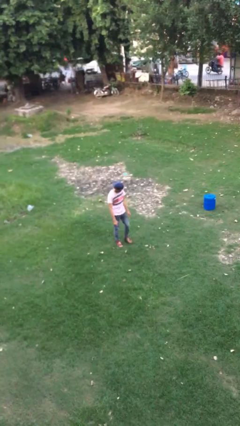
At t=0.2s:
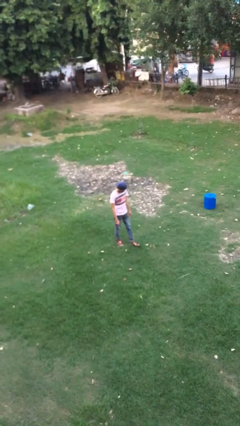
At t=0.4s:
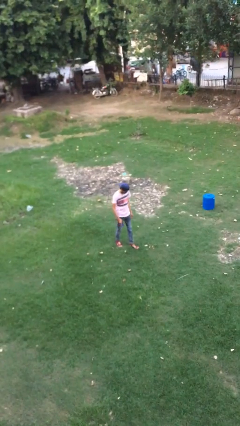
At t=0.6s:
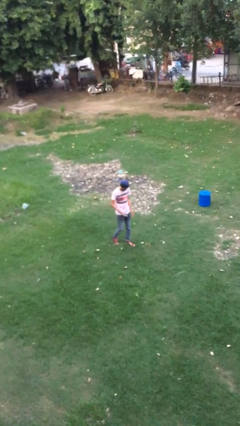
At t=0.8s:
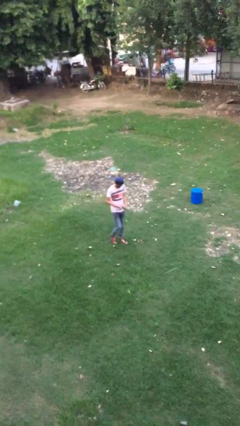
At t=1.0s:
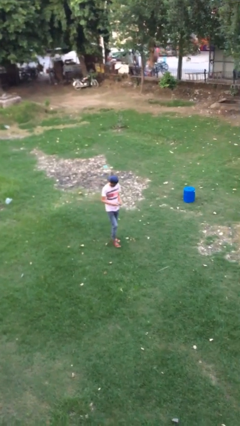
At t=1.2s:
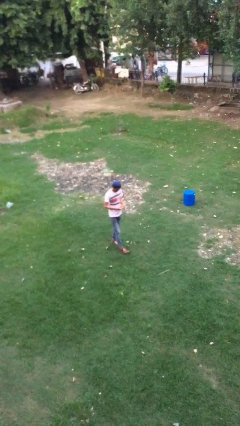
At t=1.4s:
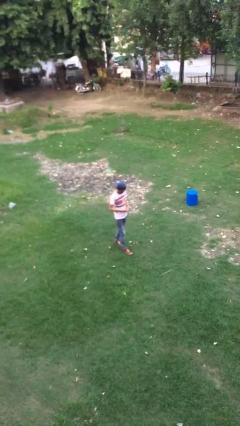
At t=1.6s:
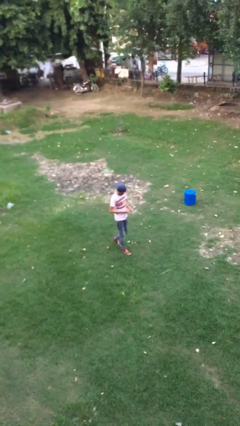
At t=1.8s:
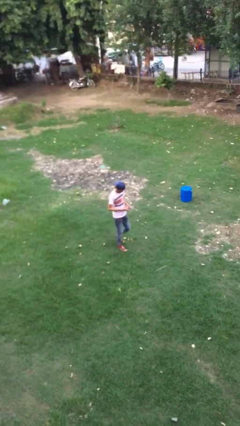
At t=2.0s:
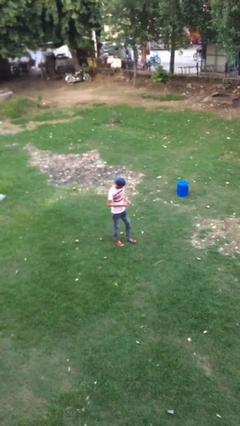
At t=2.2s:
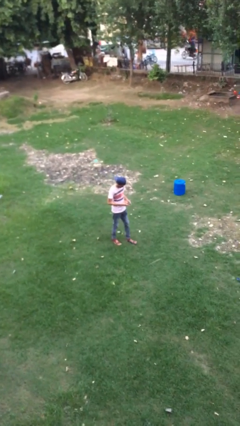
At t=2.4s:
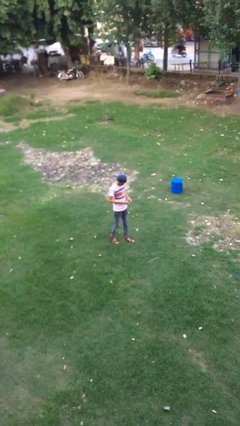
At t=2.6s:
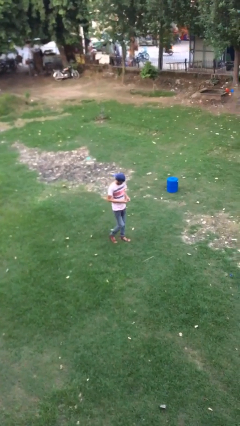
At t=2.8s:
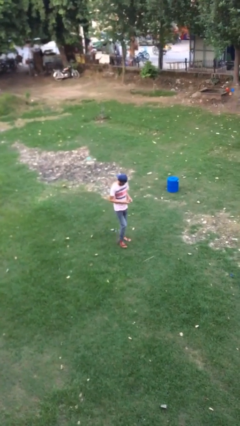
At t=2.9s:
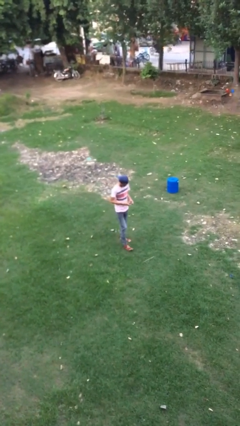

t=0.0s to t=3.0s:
person texts on phone

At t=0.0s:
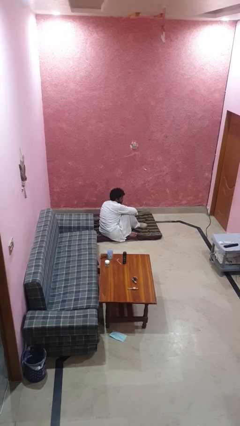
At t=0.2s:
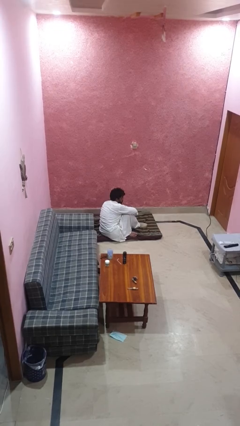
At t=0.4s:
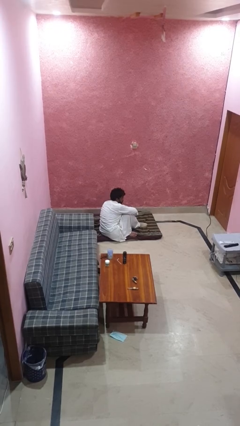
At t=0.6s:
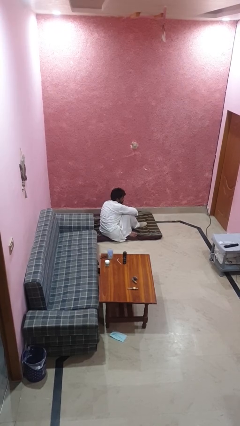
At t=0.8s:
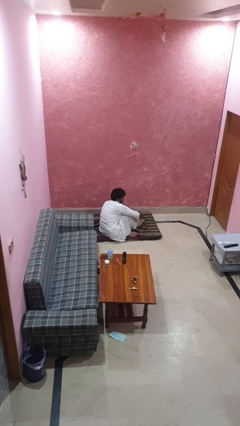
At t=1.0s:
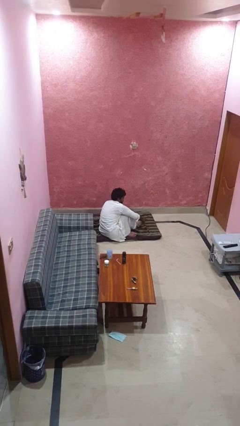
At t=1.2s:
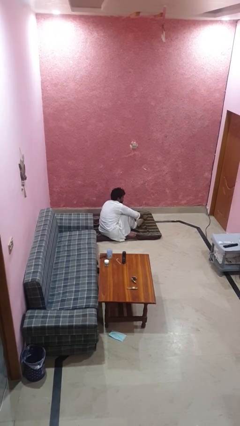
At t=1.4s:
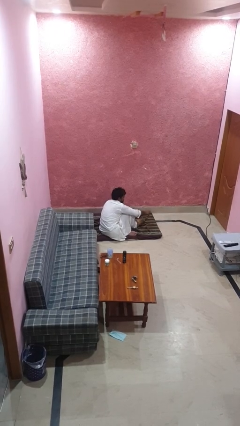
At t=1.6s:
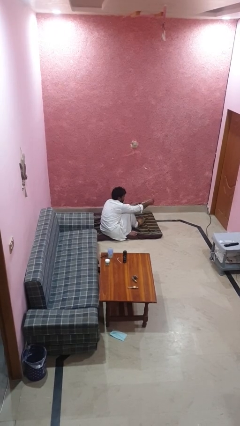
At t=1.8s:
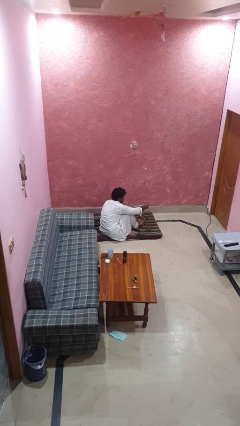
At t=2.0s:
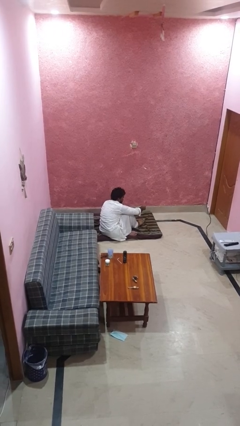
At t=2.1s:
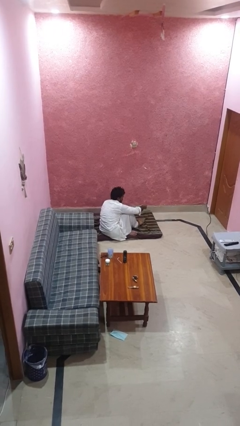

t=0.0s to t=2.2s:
person takes off socks

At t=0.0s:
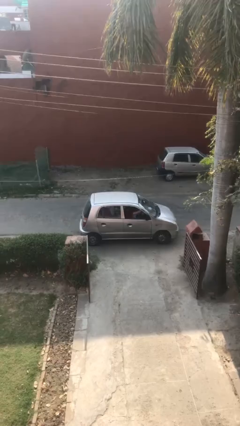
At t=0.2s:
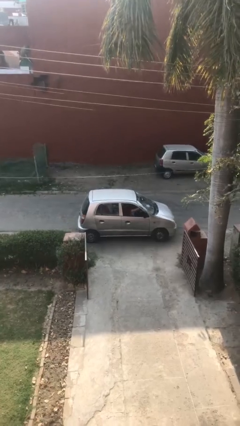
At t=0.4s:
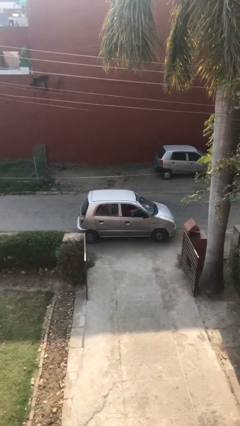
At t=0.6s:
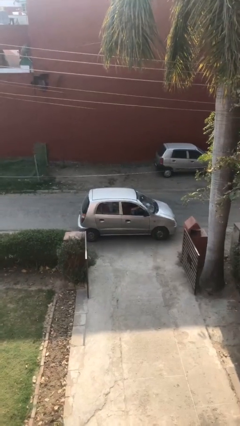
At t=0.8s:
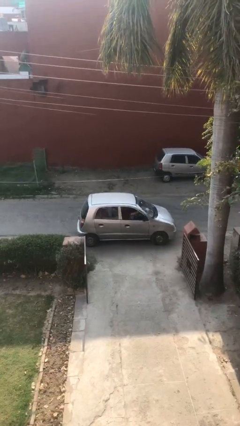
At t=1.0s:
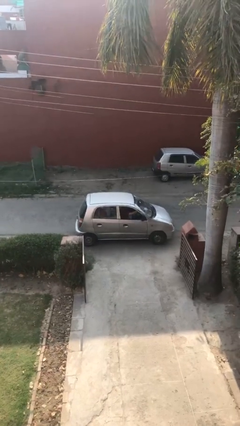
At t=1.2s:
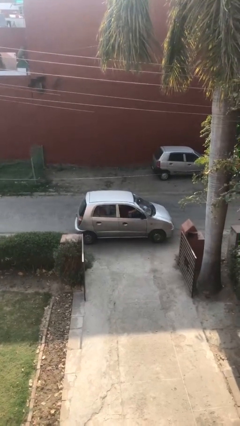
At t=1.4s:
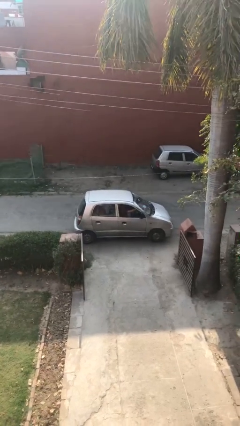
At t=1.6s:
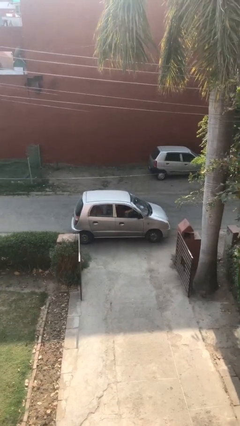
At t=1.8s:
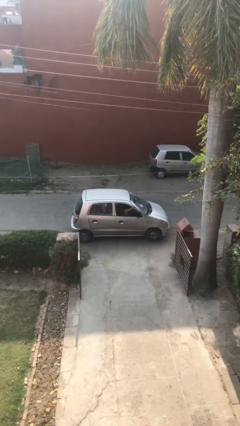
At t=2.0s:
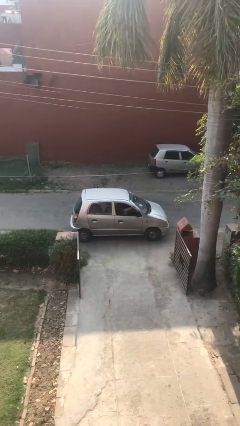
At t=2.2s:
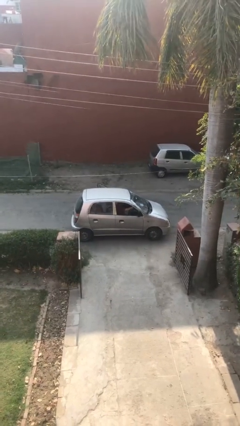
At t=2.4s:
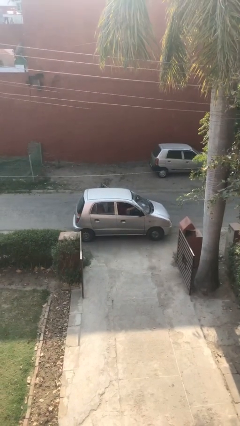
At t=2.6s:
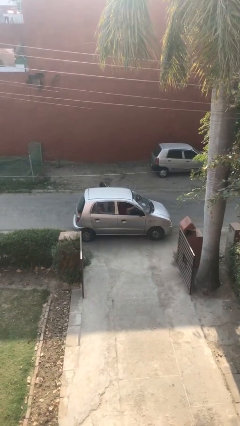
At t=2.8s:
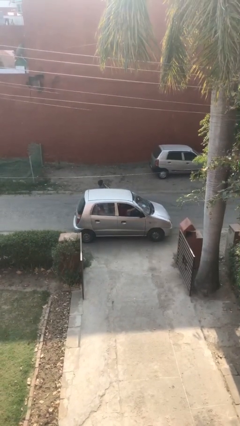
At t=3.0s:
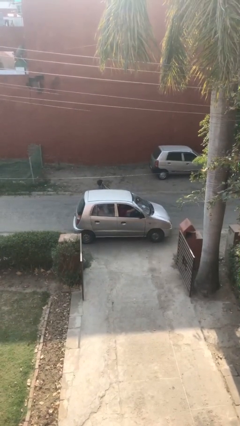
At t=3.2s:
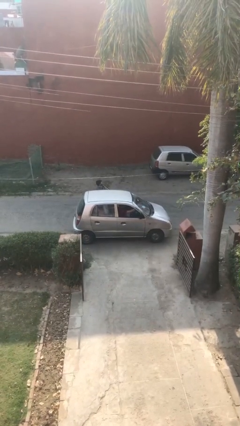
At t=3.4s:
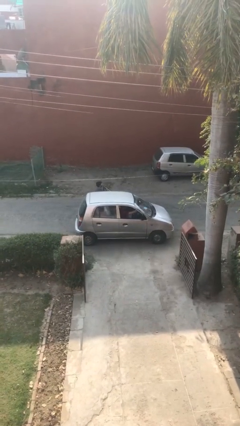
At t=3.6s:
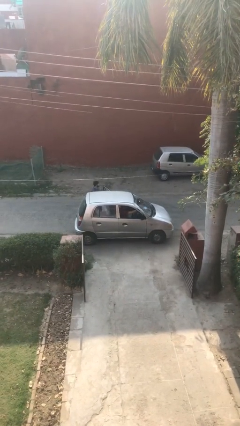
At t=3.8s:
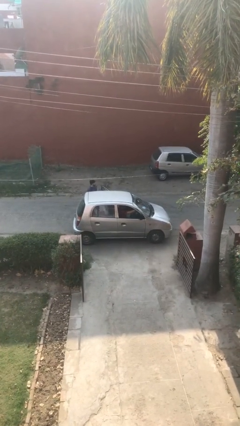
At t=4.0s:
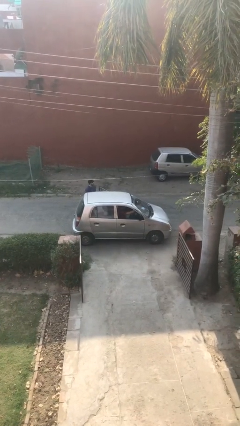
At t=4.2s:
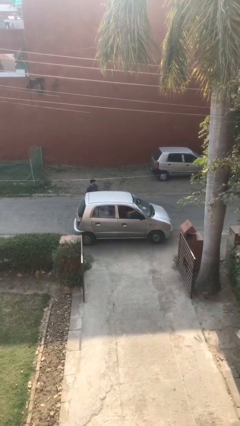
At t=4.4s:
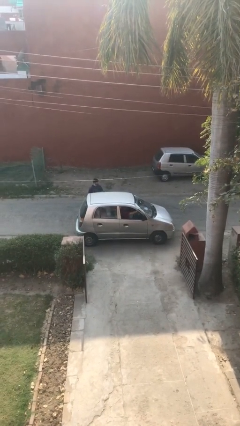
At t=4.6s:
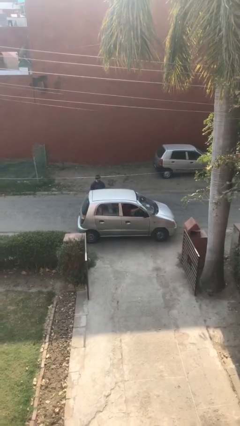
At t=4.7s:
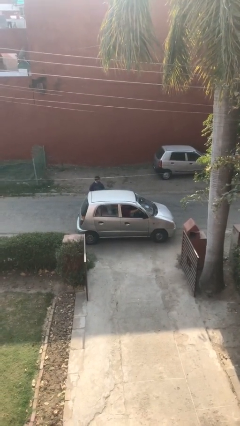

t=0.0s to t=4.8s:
car drops off person

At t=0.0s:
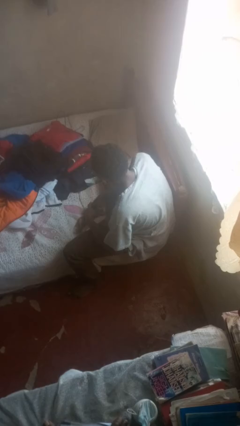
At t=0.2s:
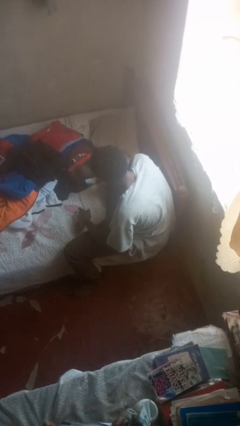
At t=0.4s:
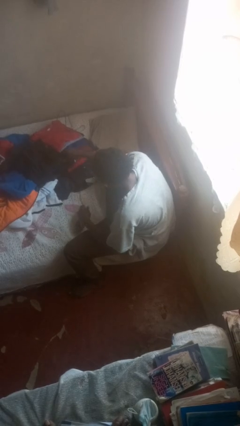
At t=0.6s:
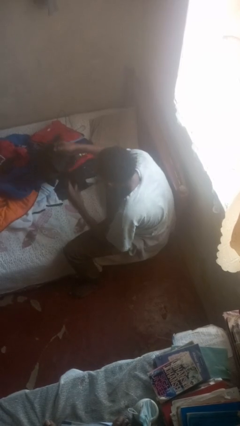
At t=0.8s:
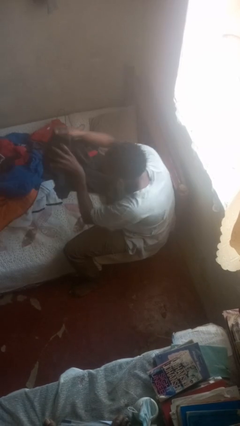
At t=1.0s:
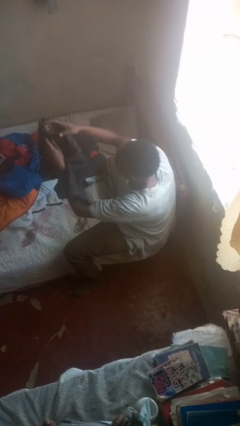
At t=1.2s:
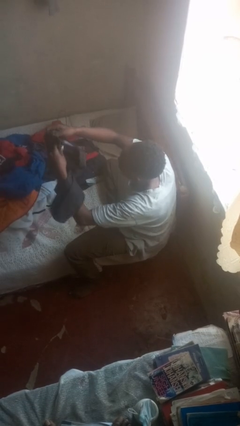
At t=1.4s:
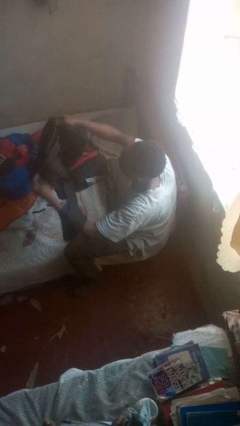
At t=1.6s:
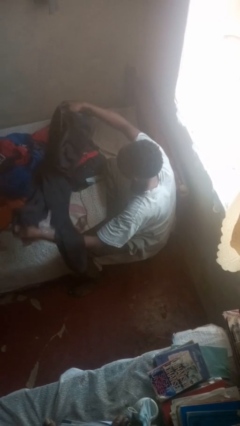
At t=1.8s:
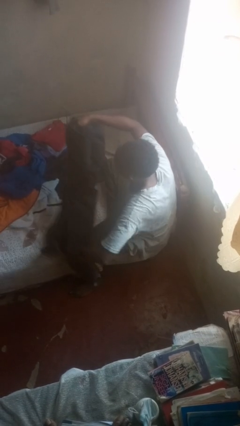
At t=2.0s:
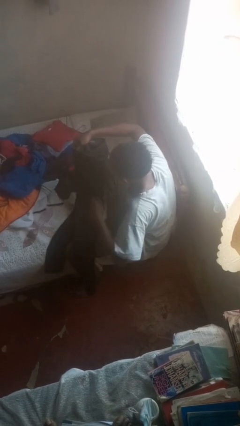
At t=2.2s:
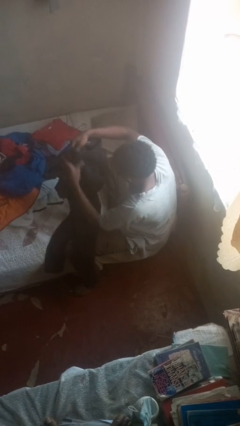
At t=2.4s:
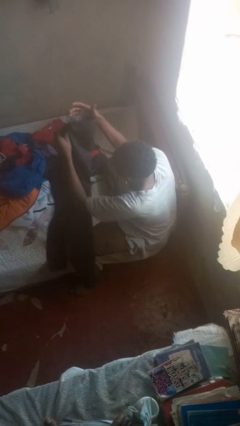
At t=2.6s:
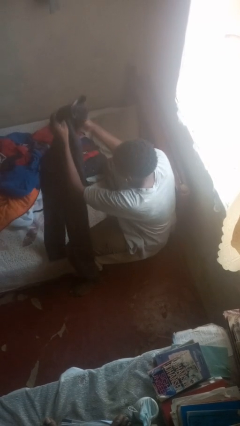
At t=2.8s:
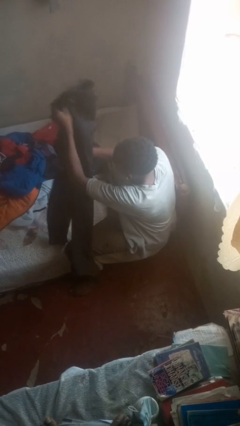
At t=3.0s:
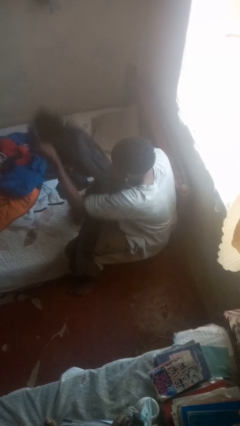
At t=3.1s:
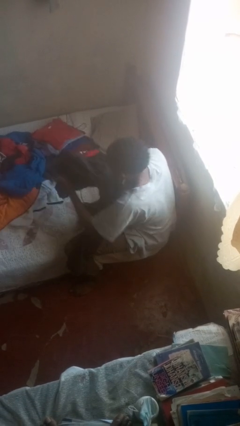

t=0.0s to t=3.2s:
person folds pants

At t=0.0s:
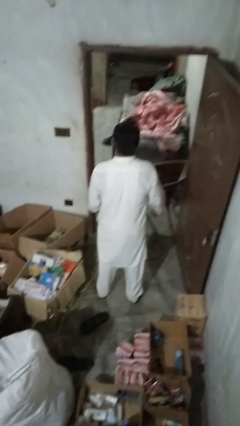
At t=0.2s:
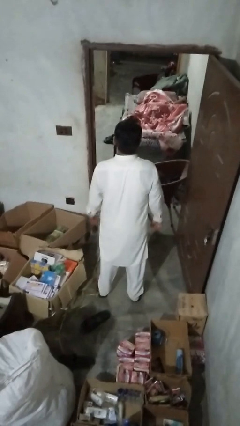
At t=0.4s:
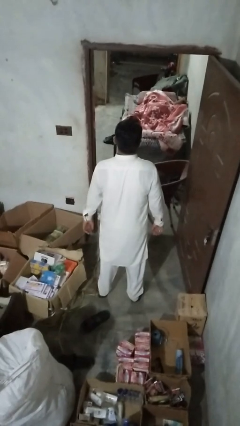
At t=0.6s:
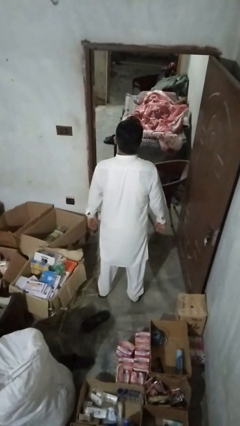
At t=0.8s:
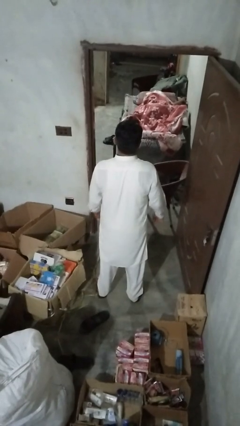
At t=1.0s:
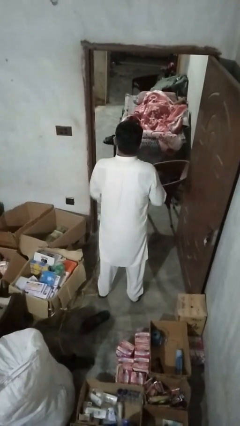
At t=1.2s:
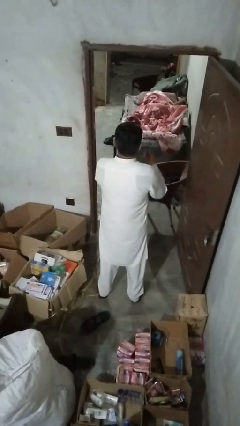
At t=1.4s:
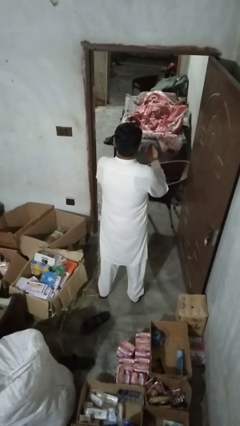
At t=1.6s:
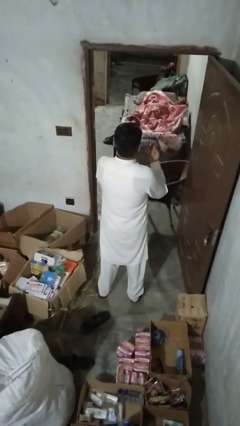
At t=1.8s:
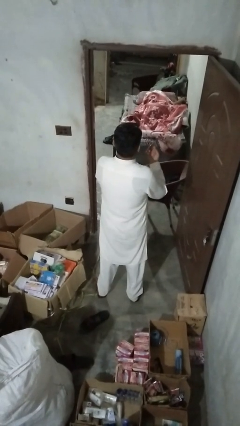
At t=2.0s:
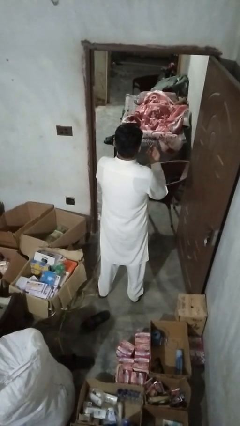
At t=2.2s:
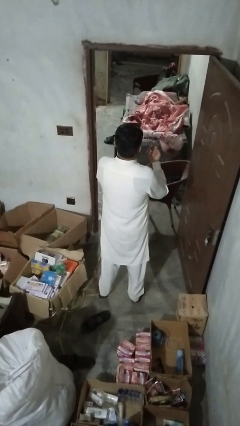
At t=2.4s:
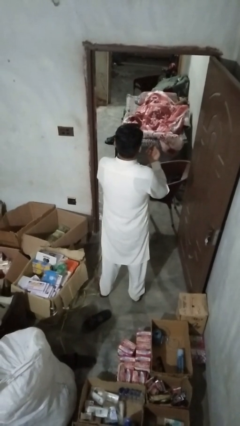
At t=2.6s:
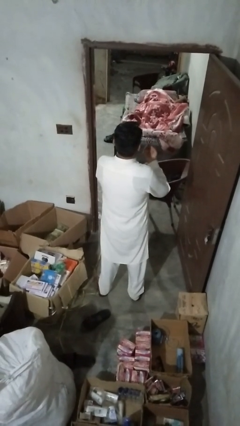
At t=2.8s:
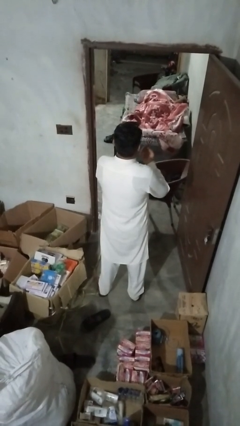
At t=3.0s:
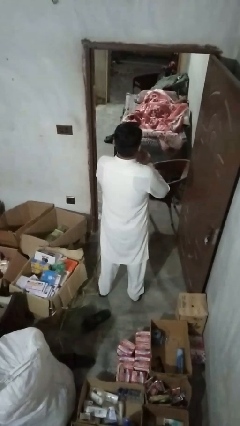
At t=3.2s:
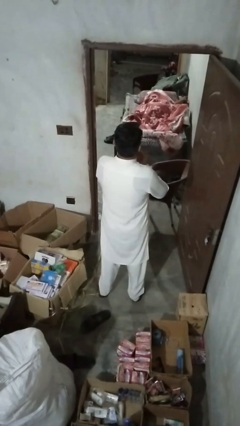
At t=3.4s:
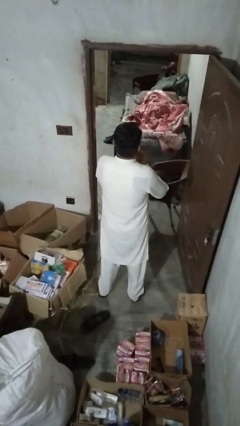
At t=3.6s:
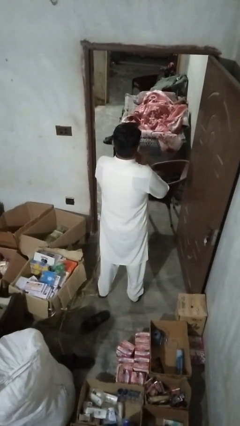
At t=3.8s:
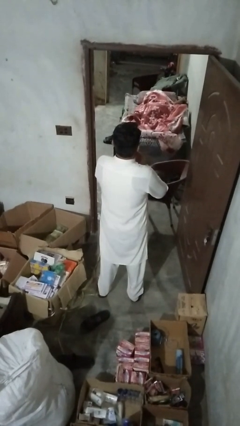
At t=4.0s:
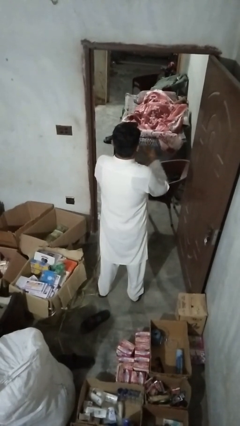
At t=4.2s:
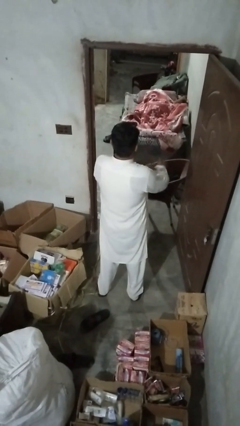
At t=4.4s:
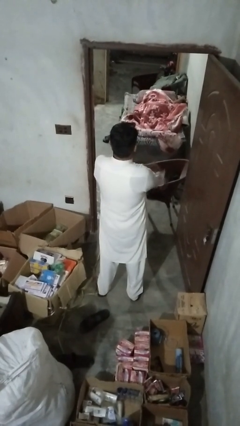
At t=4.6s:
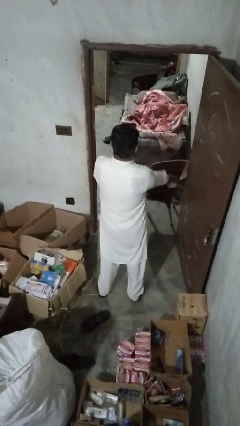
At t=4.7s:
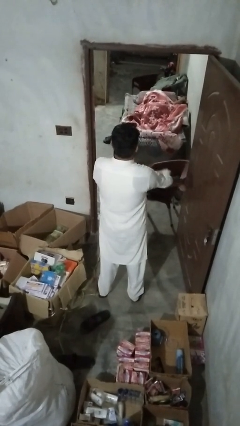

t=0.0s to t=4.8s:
person unbuttons shirt
